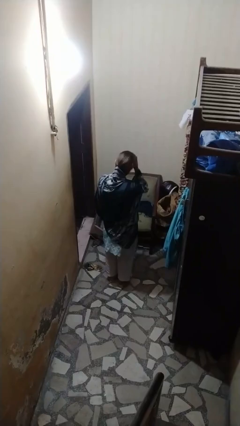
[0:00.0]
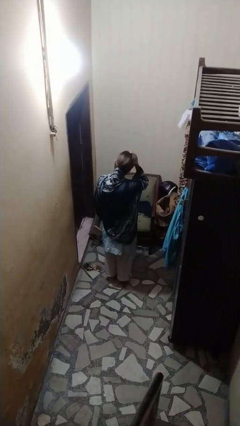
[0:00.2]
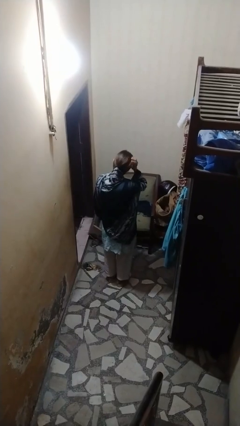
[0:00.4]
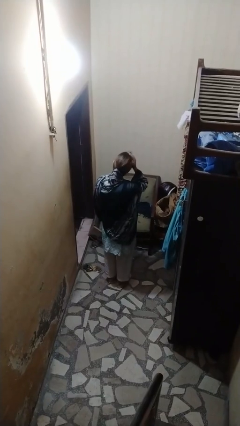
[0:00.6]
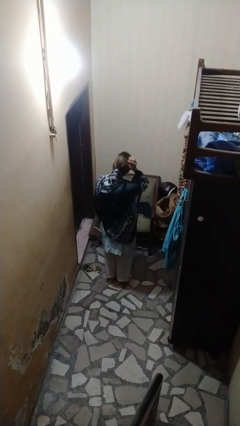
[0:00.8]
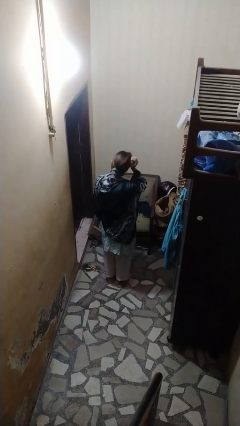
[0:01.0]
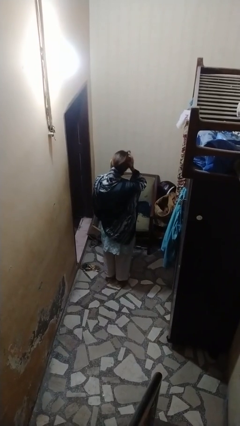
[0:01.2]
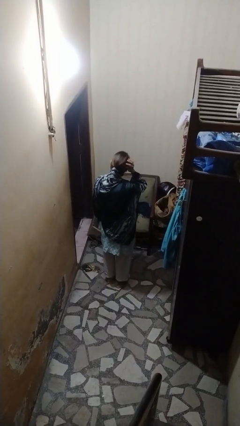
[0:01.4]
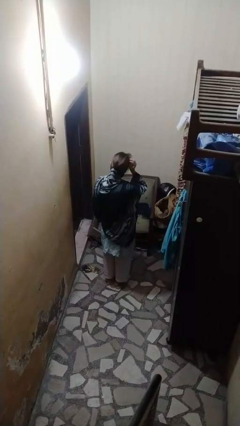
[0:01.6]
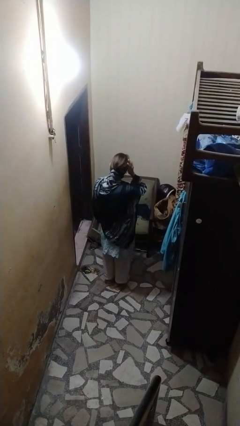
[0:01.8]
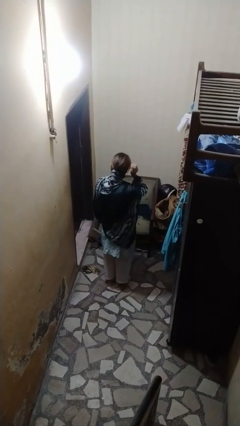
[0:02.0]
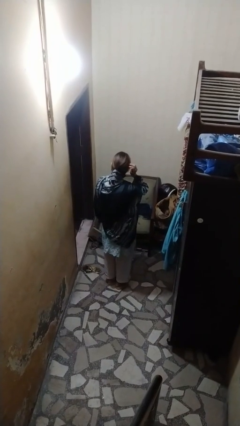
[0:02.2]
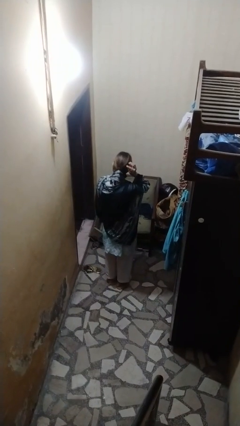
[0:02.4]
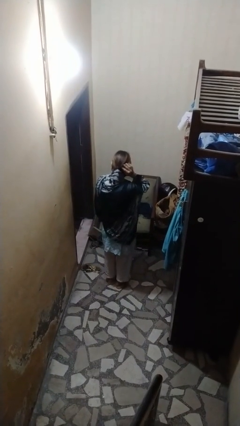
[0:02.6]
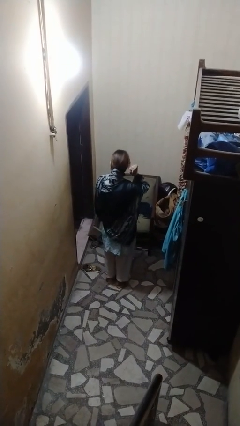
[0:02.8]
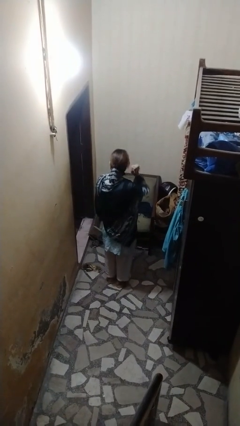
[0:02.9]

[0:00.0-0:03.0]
person strokes hair

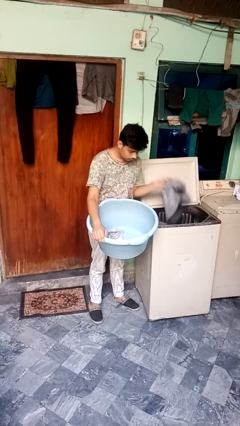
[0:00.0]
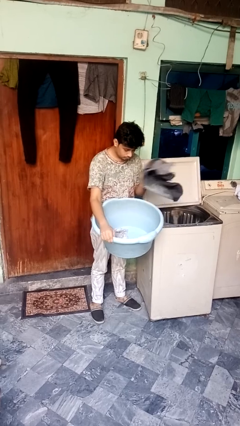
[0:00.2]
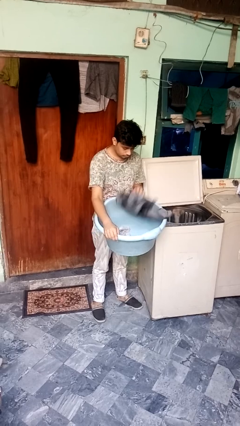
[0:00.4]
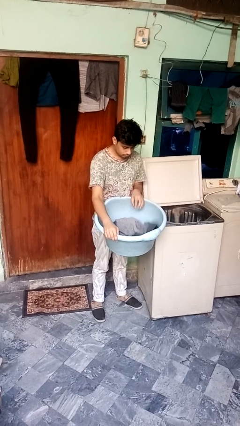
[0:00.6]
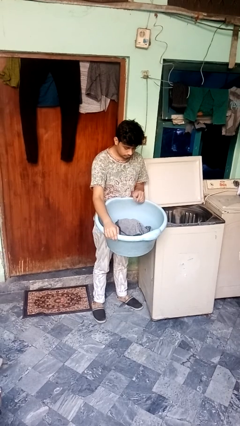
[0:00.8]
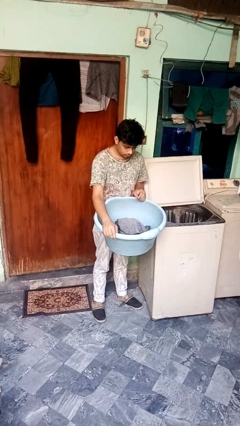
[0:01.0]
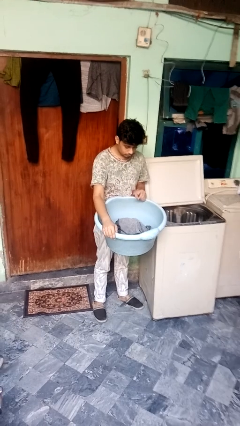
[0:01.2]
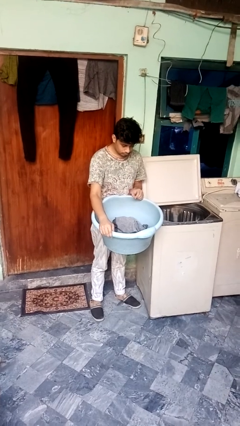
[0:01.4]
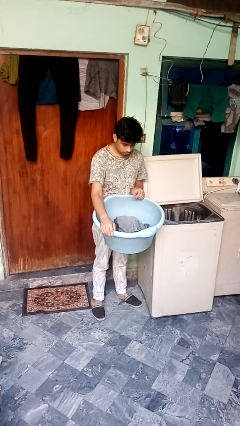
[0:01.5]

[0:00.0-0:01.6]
person loads clotheswasher

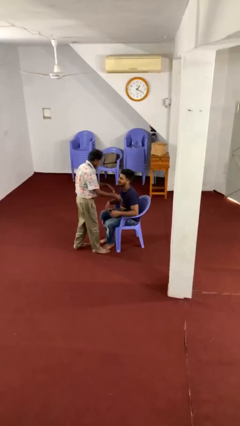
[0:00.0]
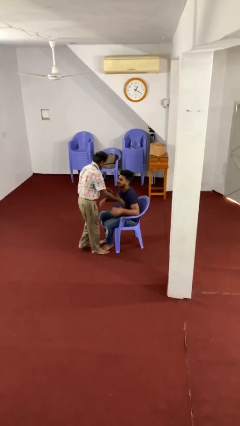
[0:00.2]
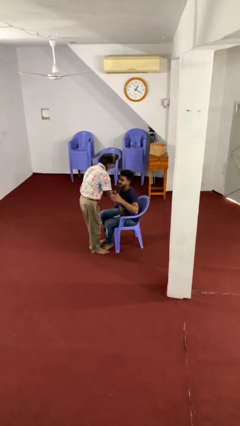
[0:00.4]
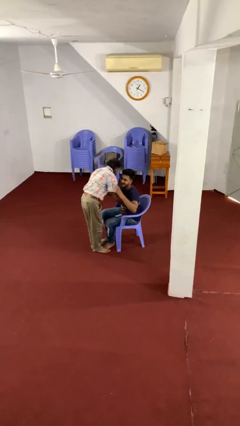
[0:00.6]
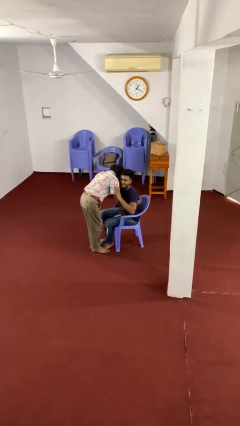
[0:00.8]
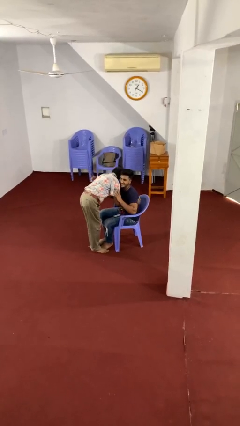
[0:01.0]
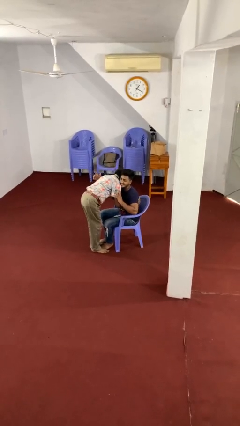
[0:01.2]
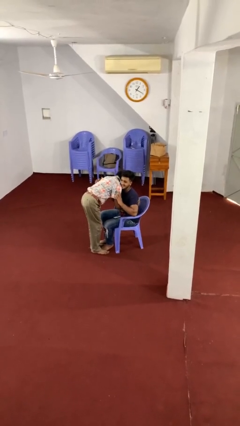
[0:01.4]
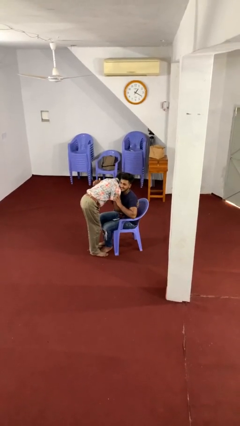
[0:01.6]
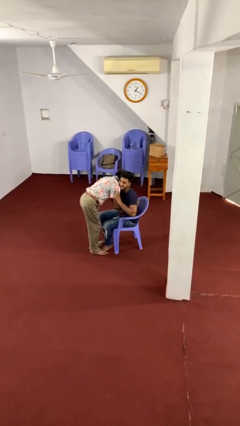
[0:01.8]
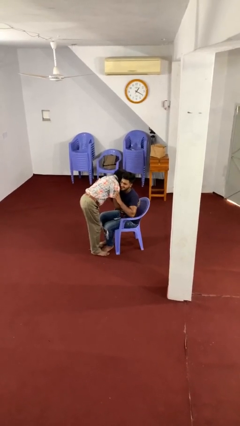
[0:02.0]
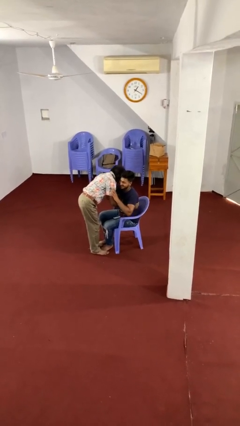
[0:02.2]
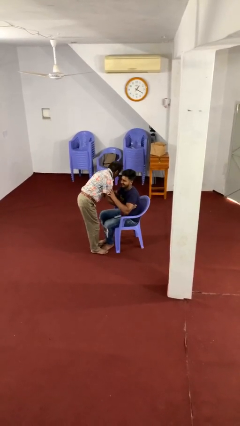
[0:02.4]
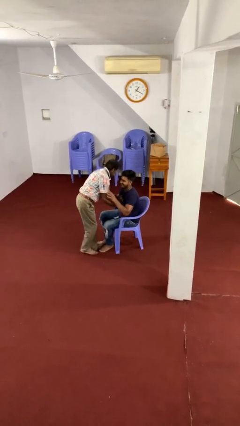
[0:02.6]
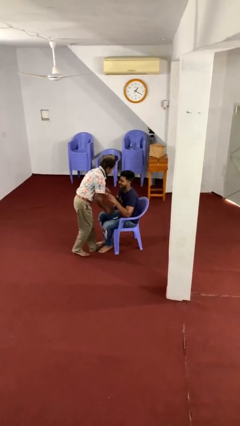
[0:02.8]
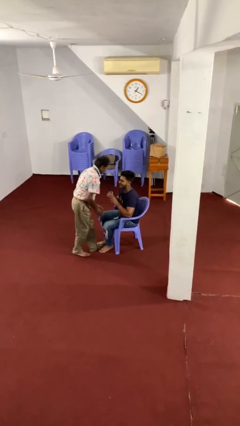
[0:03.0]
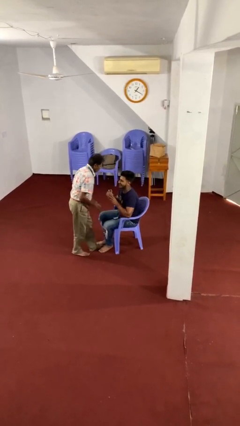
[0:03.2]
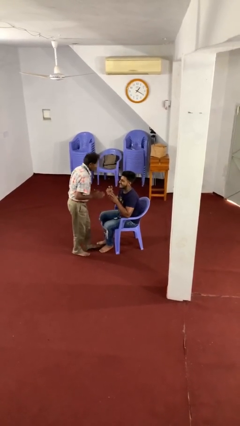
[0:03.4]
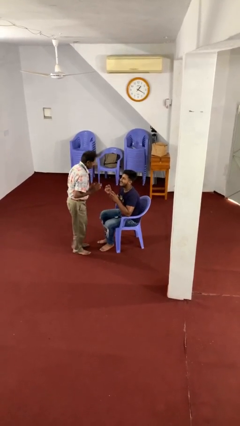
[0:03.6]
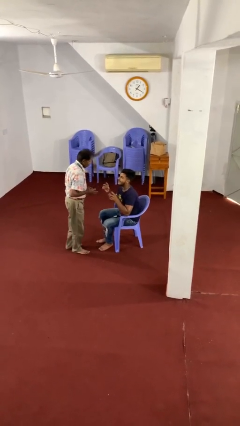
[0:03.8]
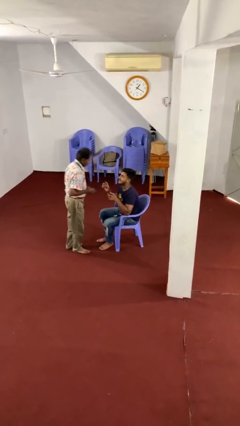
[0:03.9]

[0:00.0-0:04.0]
person embraces person

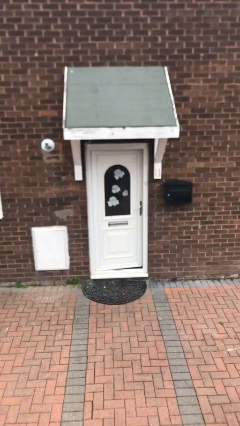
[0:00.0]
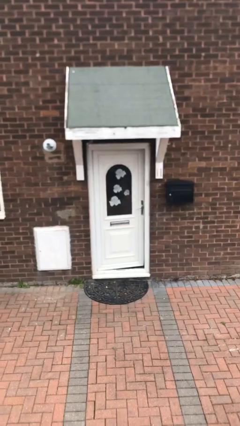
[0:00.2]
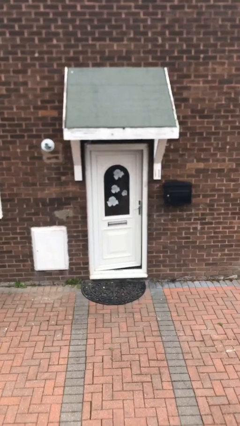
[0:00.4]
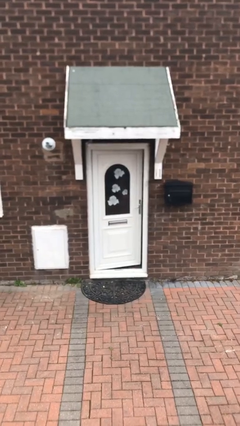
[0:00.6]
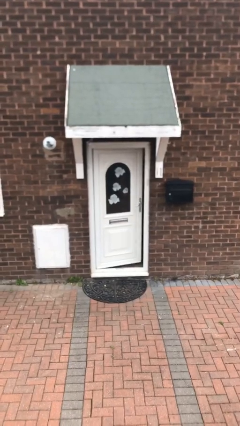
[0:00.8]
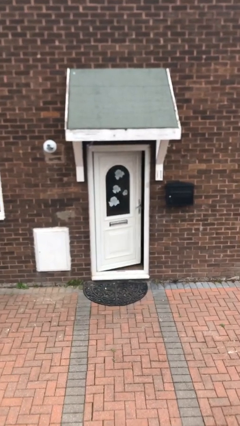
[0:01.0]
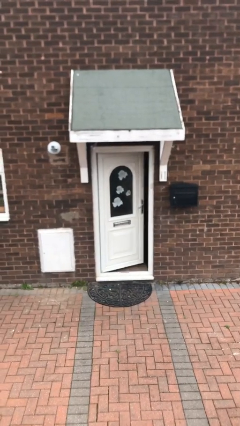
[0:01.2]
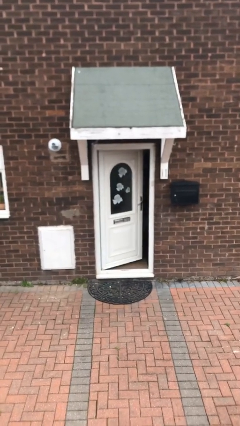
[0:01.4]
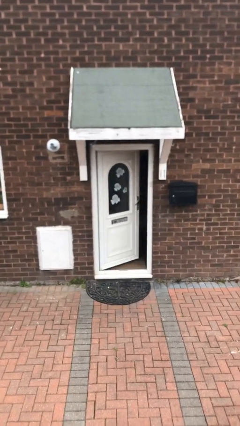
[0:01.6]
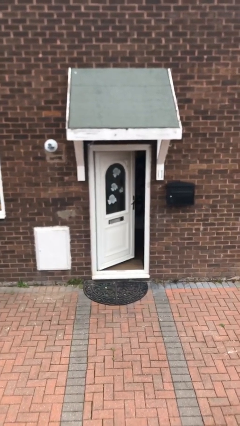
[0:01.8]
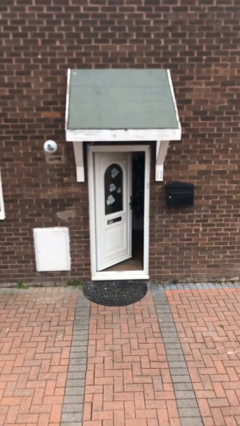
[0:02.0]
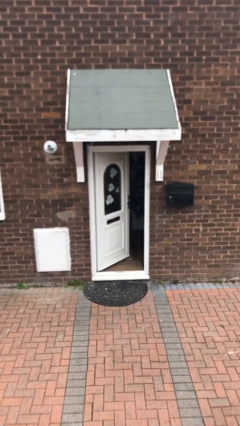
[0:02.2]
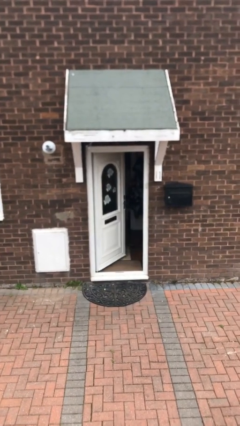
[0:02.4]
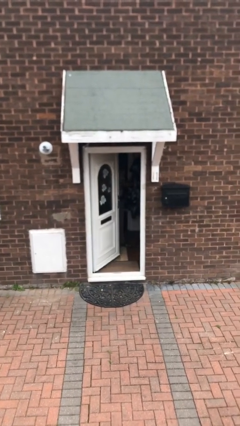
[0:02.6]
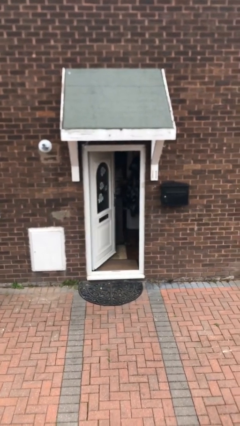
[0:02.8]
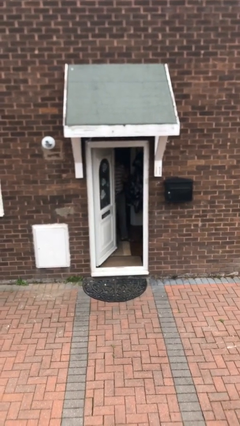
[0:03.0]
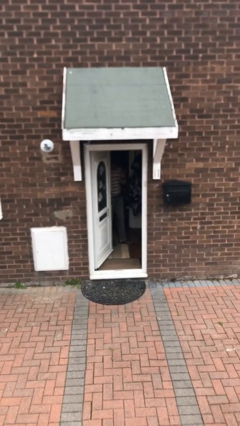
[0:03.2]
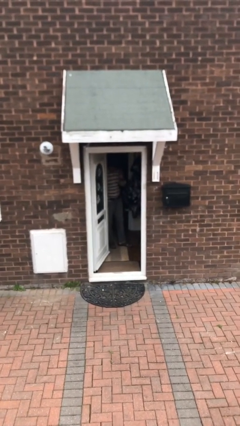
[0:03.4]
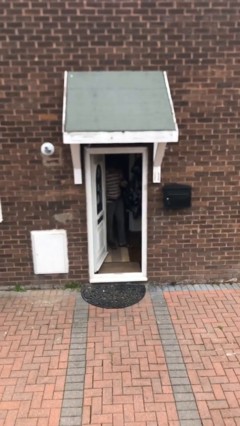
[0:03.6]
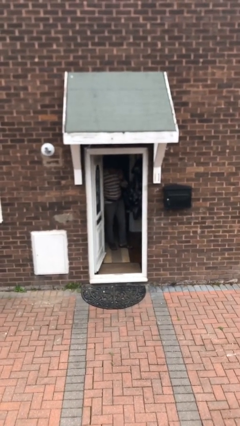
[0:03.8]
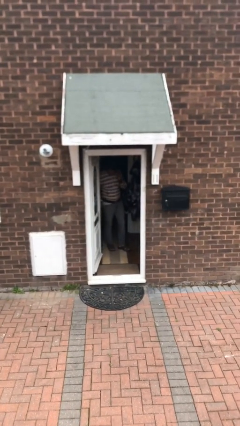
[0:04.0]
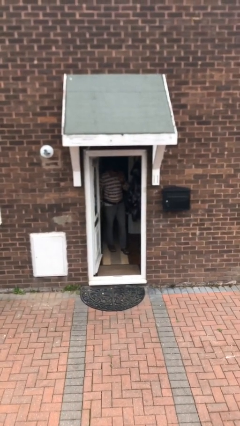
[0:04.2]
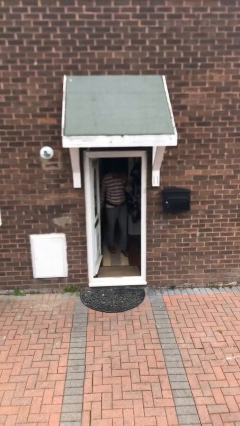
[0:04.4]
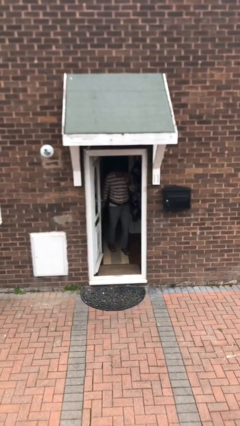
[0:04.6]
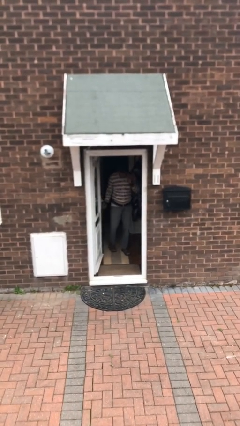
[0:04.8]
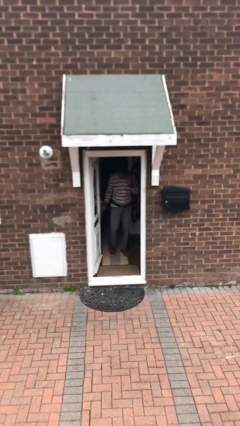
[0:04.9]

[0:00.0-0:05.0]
person opens facility door
